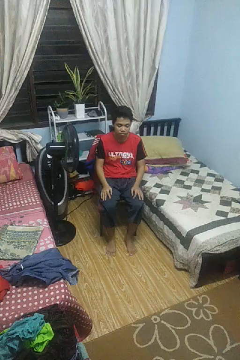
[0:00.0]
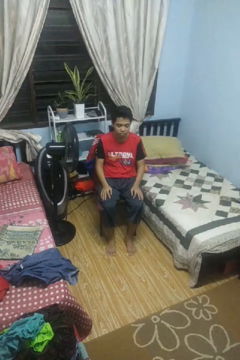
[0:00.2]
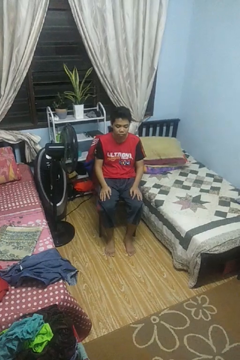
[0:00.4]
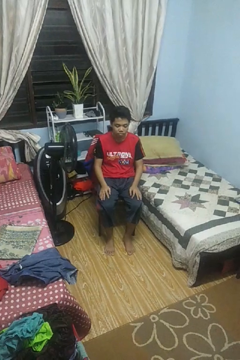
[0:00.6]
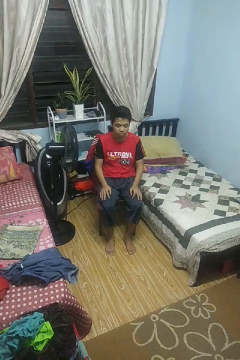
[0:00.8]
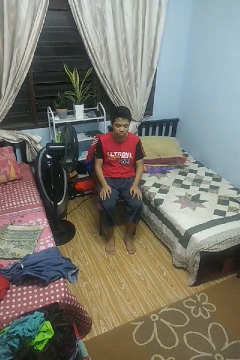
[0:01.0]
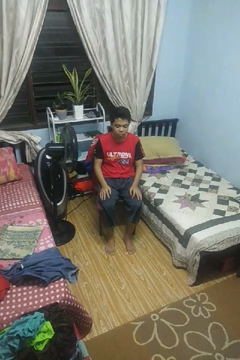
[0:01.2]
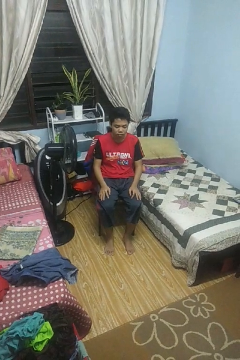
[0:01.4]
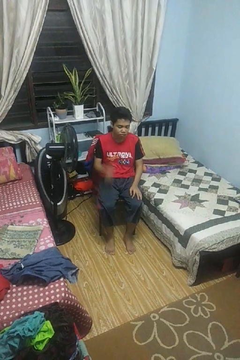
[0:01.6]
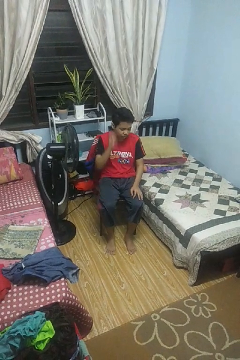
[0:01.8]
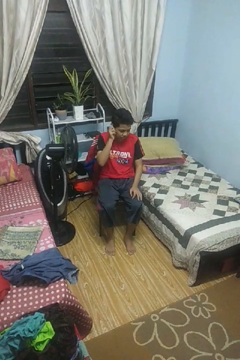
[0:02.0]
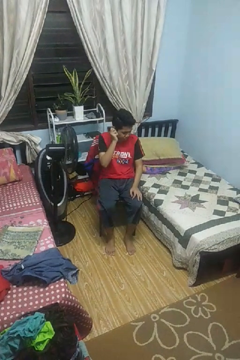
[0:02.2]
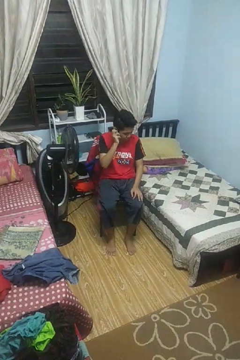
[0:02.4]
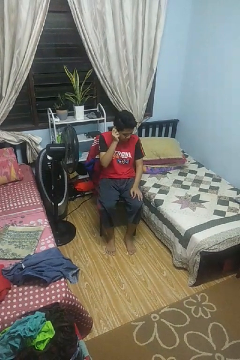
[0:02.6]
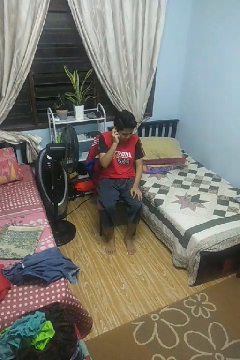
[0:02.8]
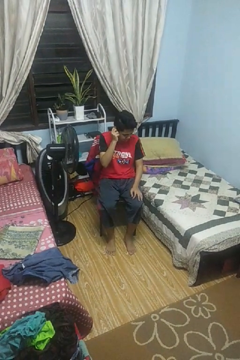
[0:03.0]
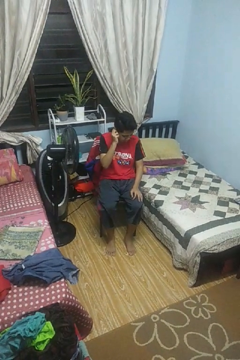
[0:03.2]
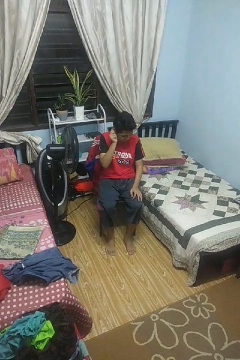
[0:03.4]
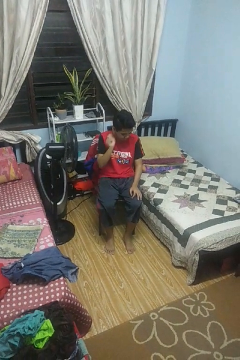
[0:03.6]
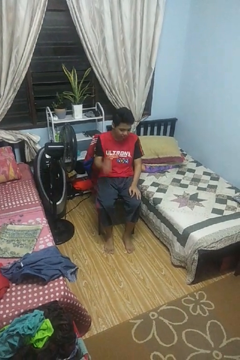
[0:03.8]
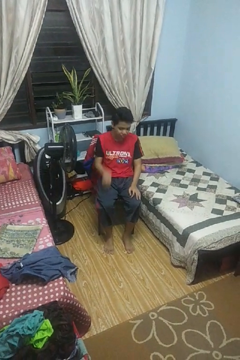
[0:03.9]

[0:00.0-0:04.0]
person touches earlobe

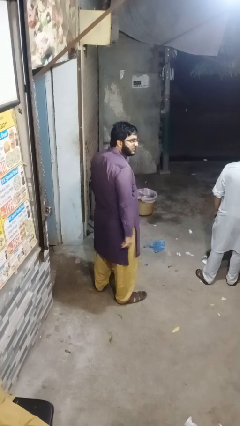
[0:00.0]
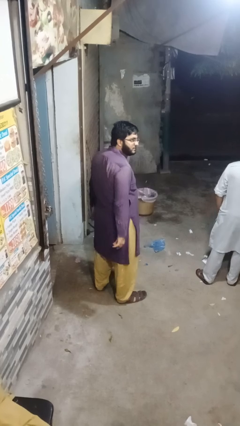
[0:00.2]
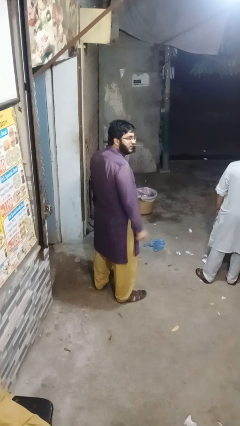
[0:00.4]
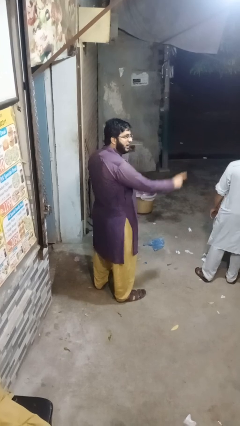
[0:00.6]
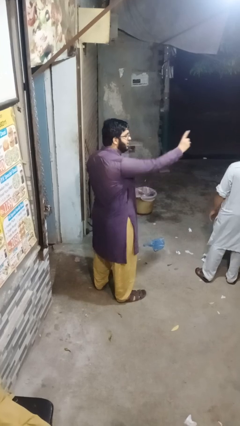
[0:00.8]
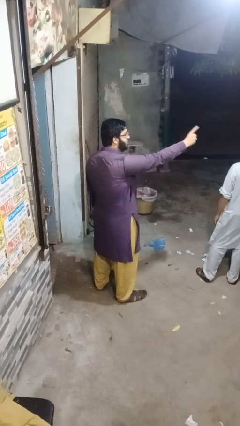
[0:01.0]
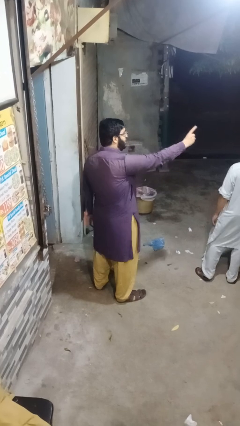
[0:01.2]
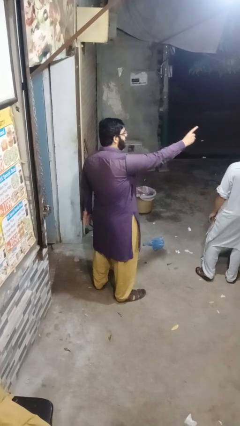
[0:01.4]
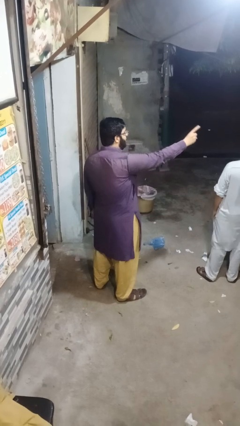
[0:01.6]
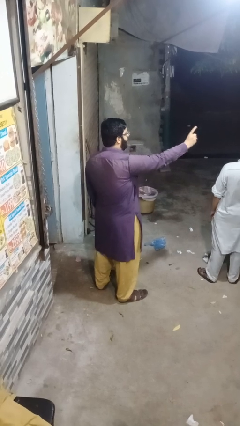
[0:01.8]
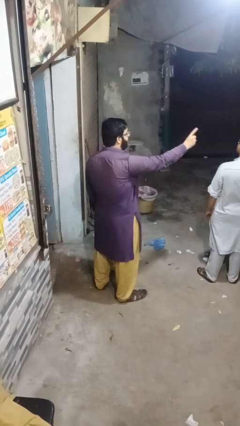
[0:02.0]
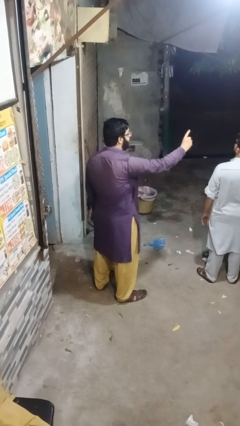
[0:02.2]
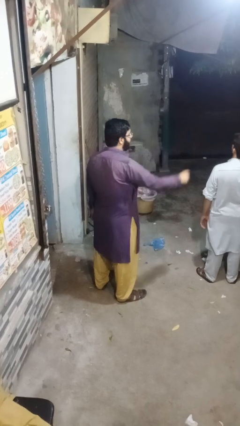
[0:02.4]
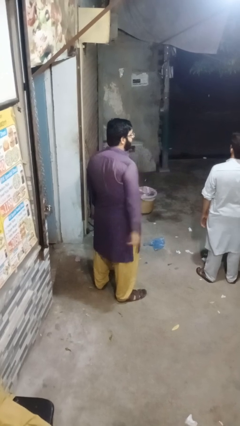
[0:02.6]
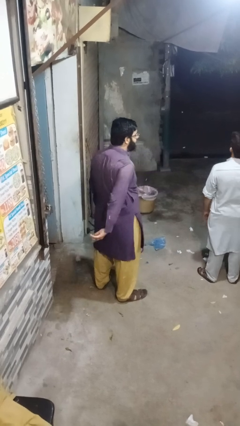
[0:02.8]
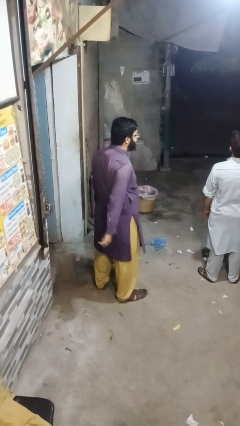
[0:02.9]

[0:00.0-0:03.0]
person points at person

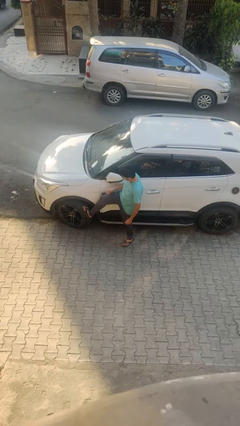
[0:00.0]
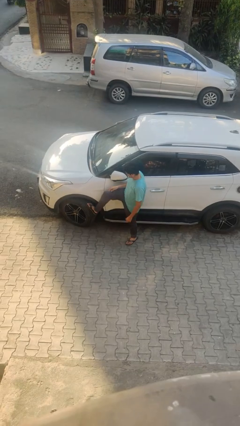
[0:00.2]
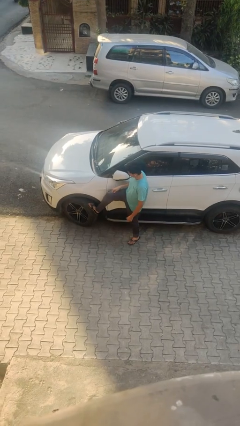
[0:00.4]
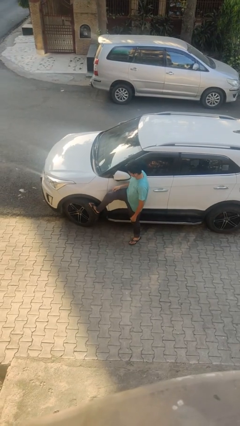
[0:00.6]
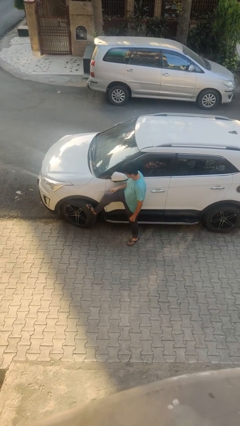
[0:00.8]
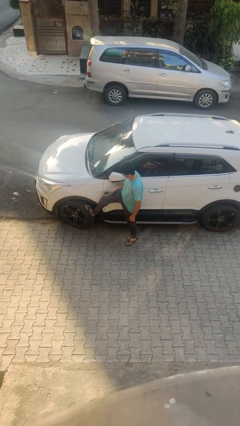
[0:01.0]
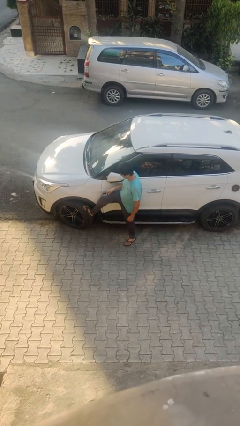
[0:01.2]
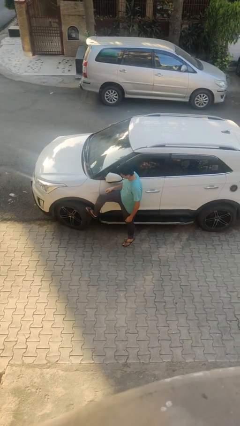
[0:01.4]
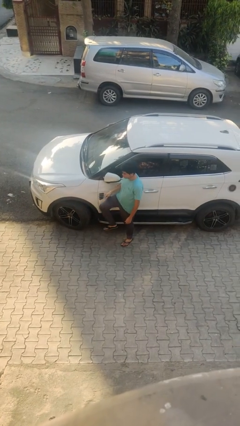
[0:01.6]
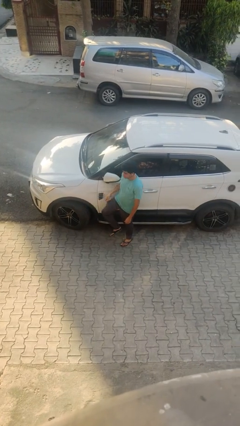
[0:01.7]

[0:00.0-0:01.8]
person kicks car tires

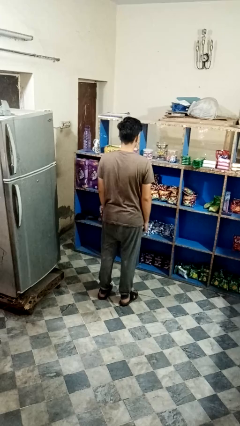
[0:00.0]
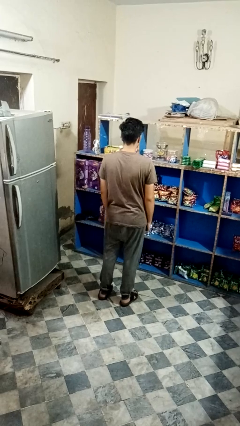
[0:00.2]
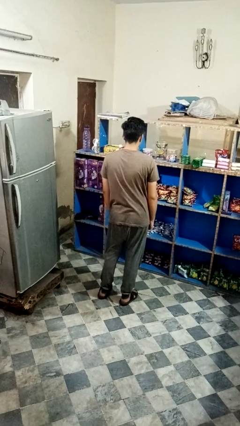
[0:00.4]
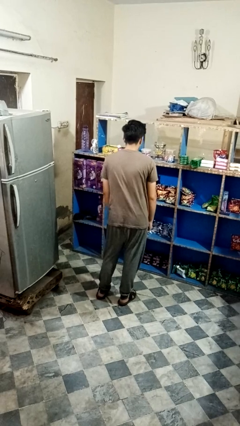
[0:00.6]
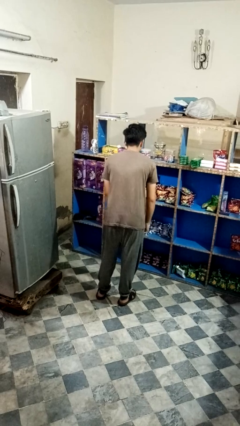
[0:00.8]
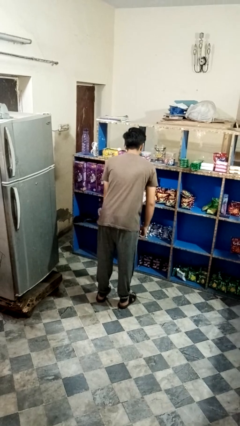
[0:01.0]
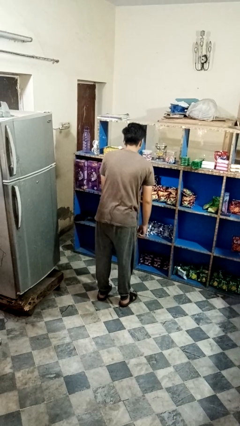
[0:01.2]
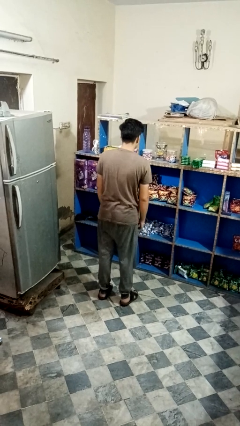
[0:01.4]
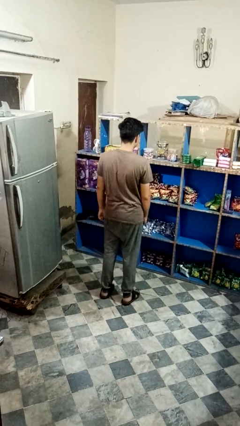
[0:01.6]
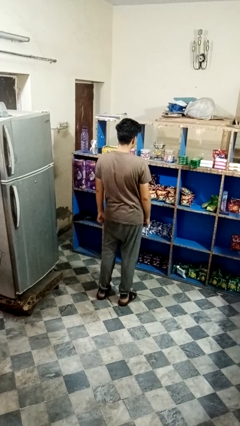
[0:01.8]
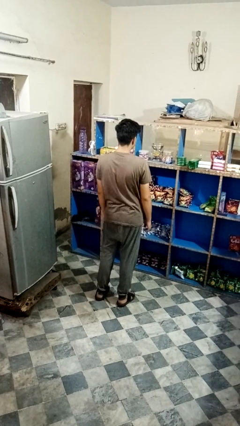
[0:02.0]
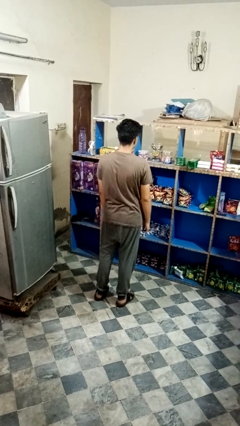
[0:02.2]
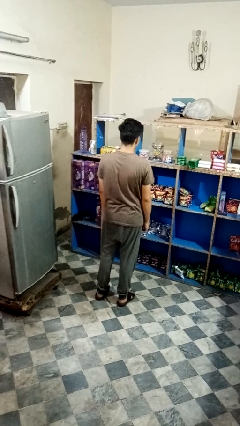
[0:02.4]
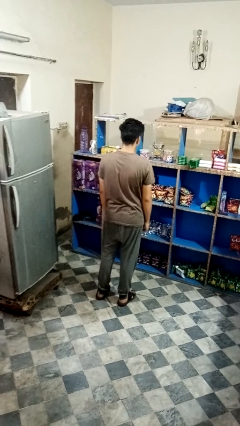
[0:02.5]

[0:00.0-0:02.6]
person wiggles hips

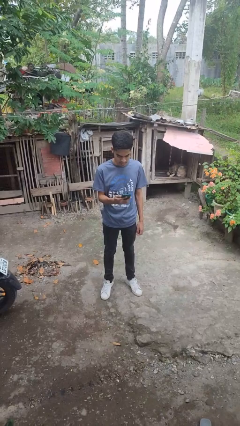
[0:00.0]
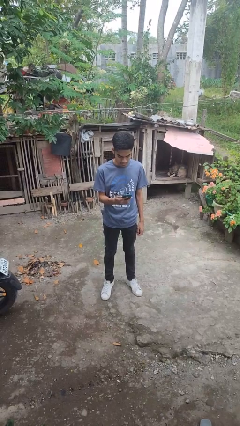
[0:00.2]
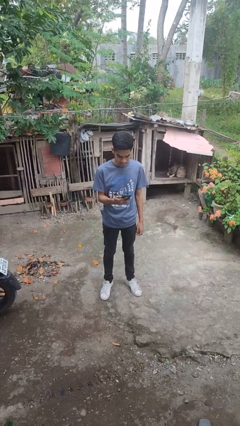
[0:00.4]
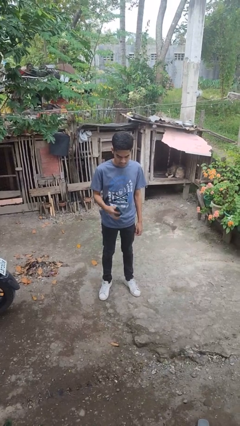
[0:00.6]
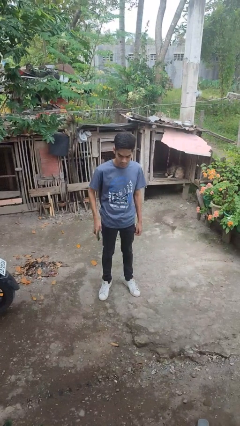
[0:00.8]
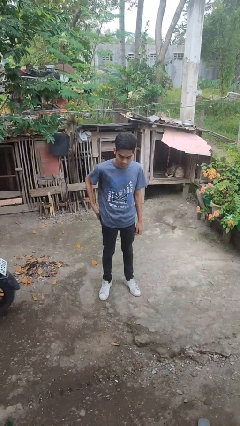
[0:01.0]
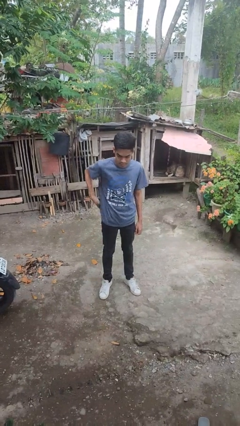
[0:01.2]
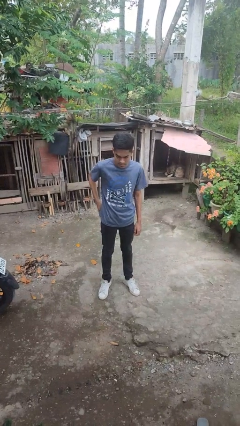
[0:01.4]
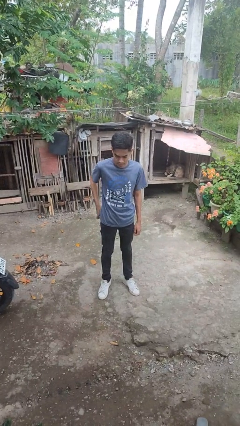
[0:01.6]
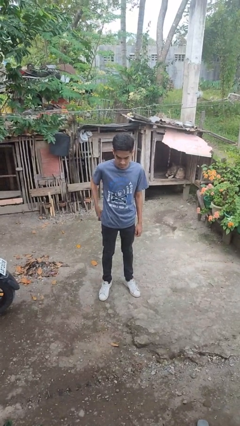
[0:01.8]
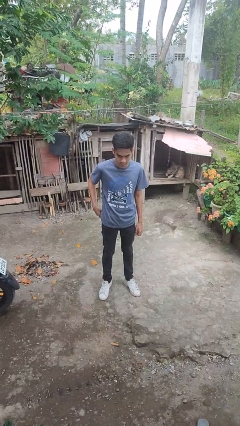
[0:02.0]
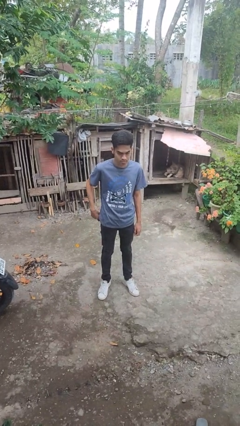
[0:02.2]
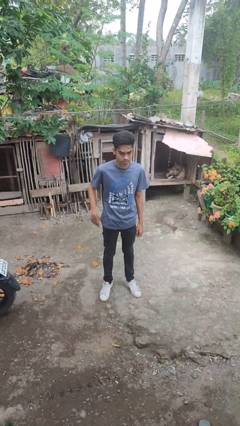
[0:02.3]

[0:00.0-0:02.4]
person puts phone into pocket

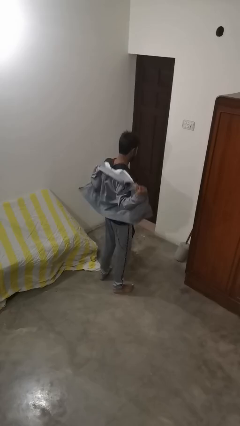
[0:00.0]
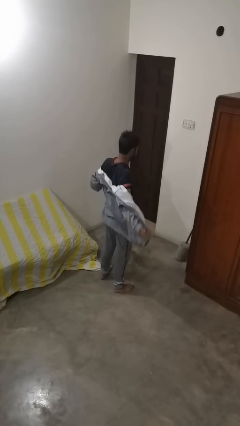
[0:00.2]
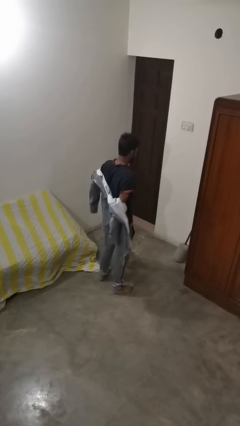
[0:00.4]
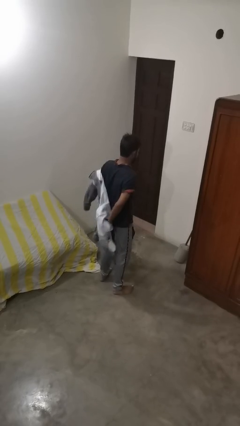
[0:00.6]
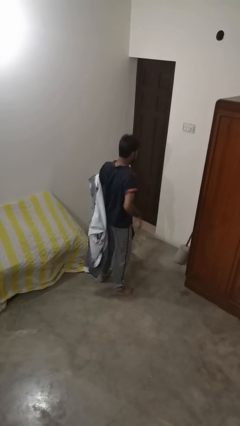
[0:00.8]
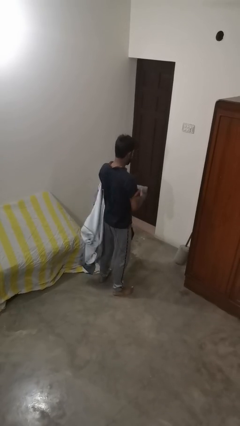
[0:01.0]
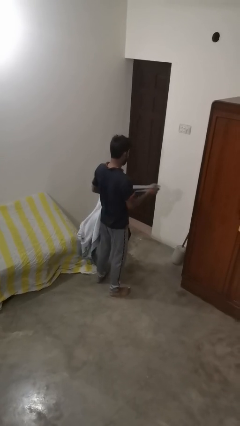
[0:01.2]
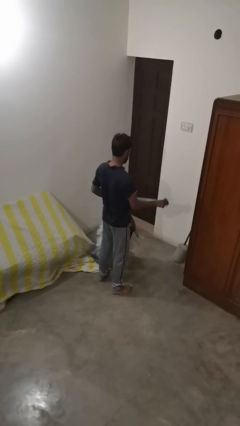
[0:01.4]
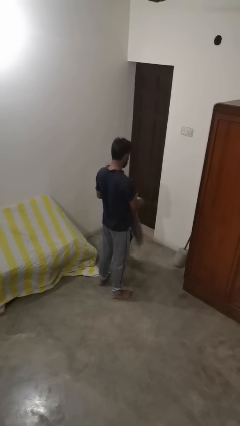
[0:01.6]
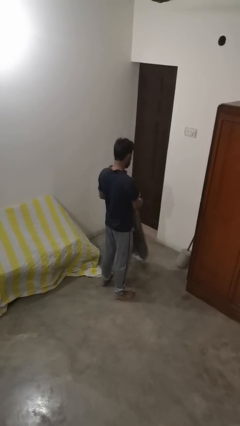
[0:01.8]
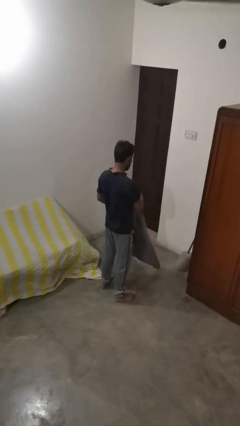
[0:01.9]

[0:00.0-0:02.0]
person takes off jacket

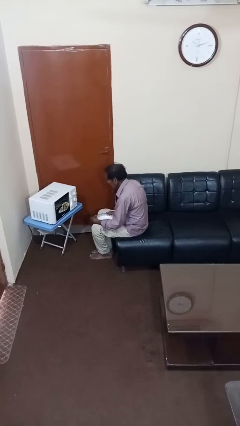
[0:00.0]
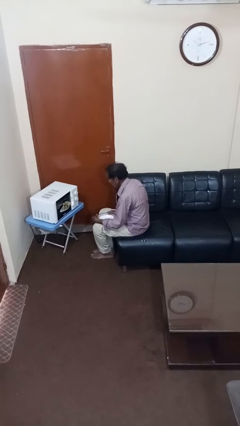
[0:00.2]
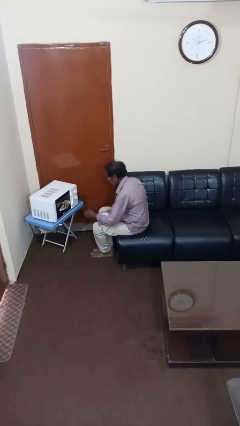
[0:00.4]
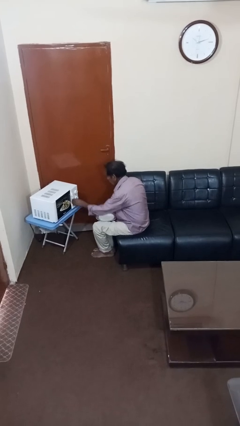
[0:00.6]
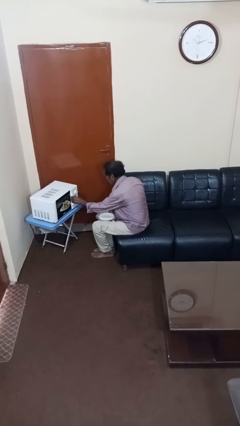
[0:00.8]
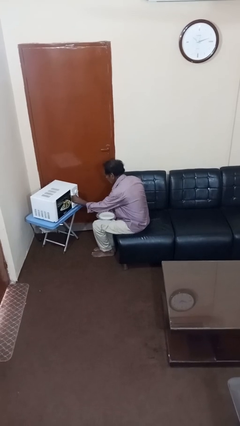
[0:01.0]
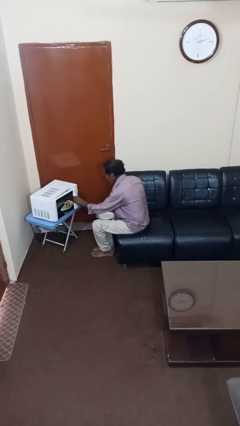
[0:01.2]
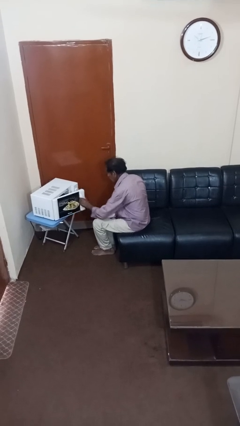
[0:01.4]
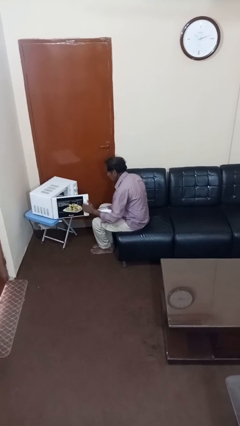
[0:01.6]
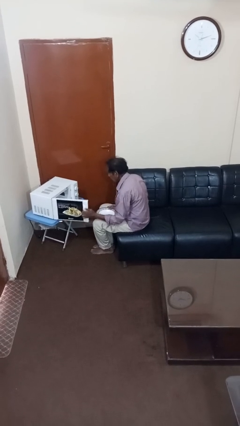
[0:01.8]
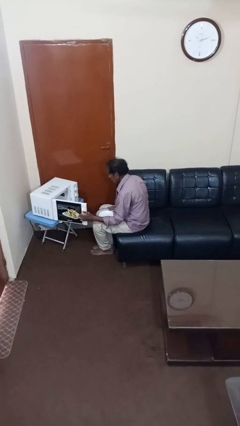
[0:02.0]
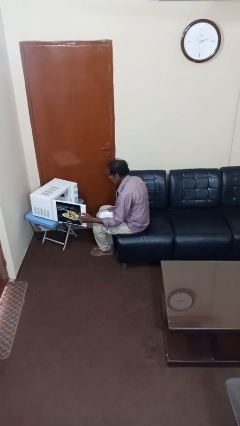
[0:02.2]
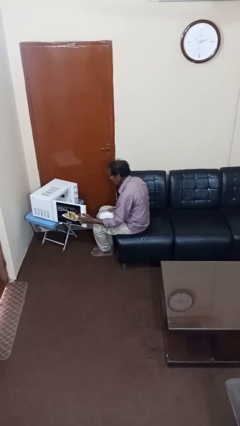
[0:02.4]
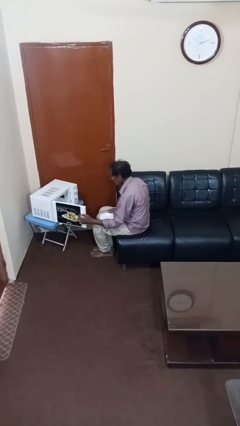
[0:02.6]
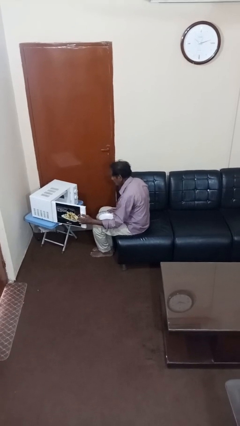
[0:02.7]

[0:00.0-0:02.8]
person opens microwave
